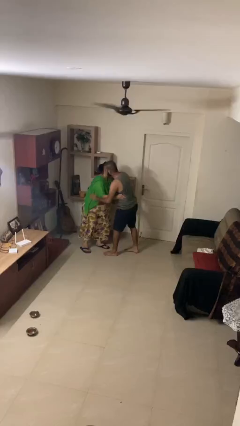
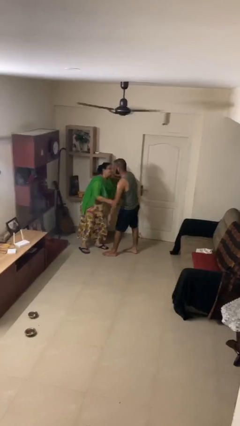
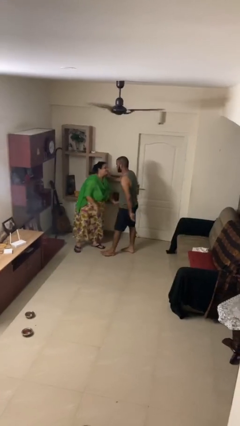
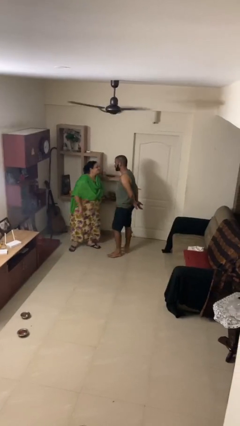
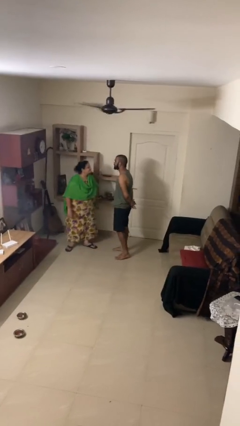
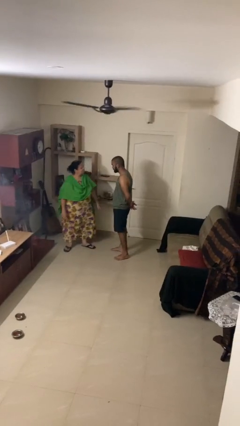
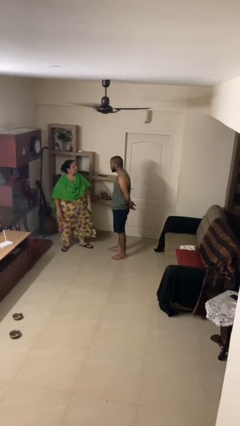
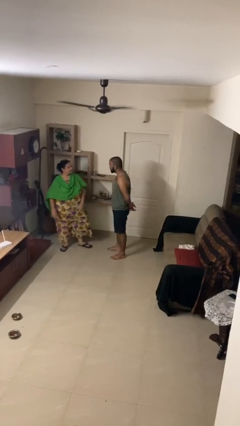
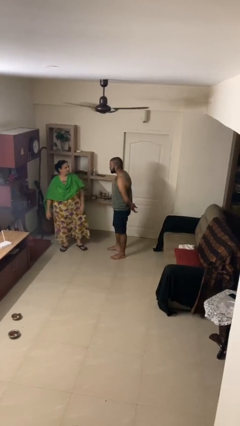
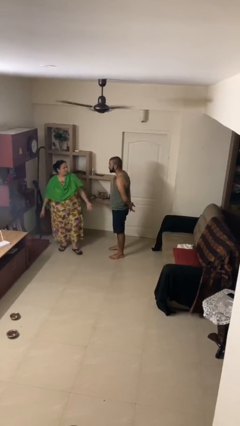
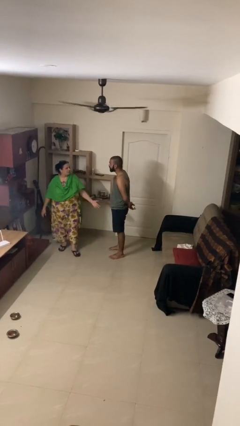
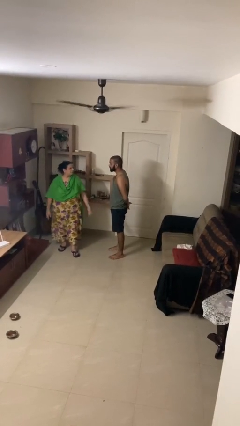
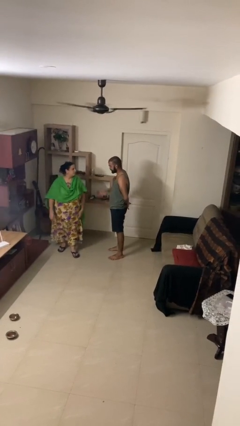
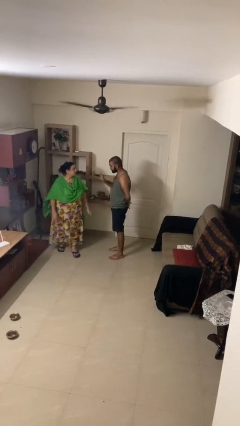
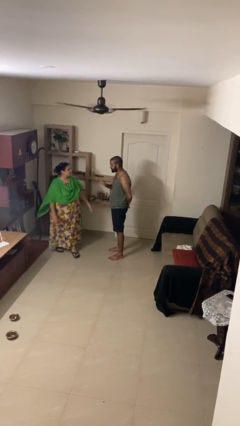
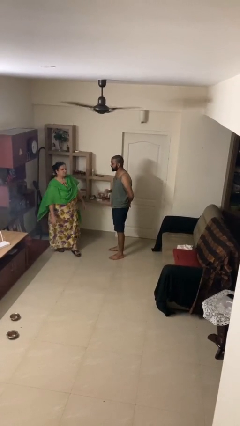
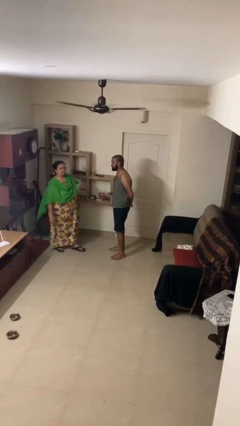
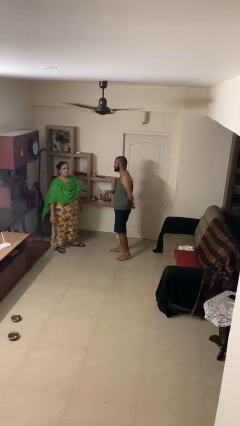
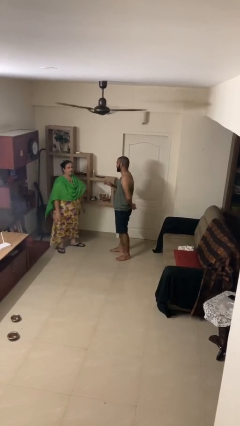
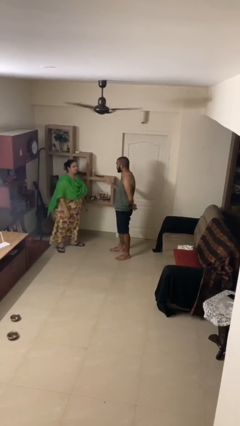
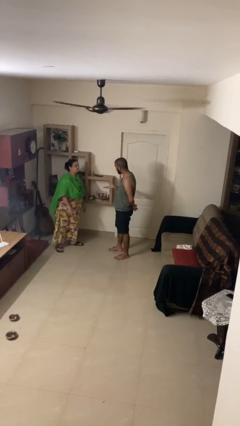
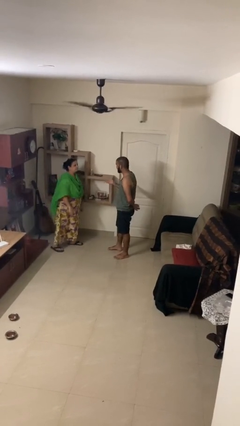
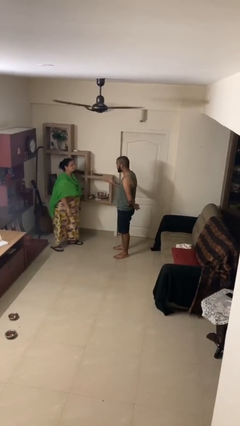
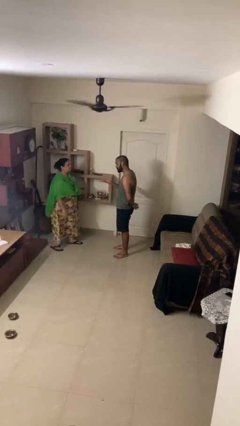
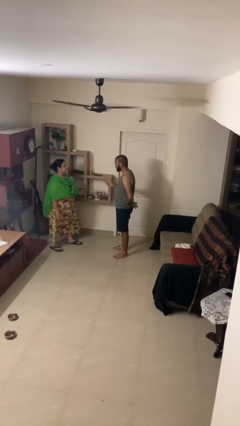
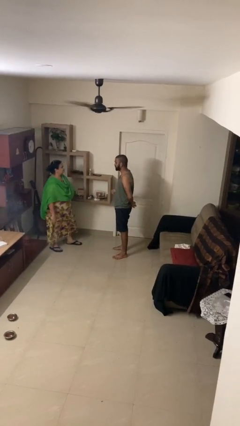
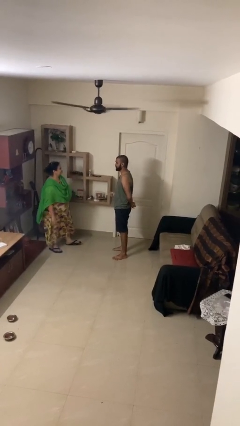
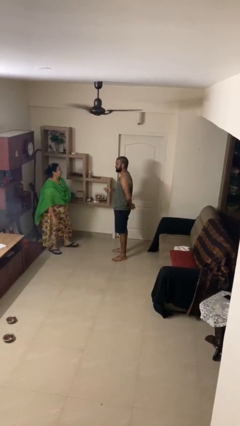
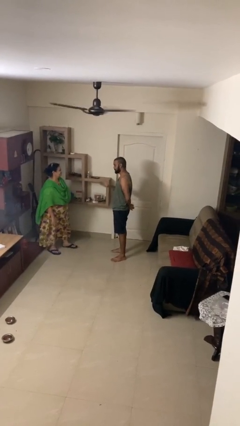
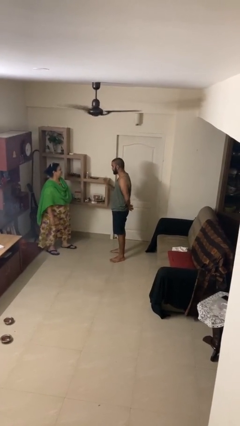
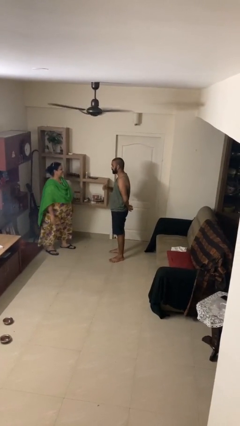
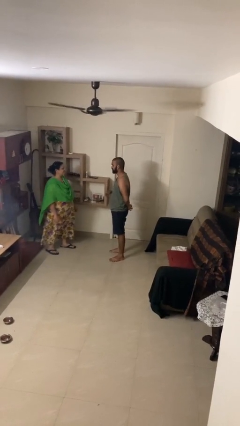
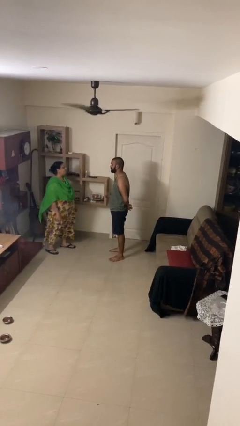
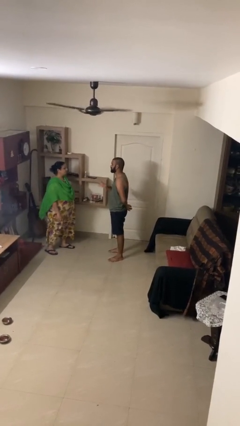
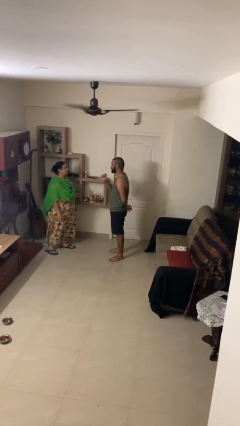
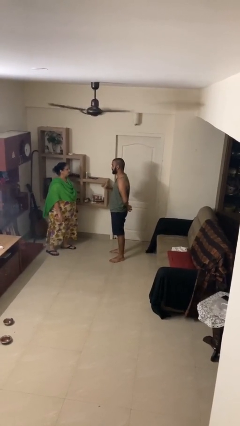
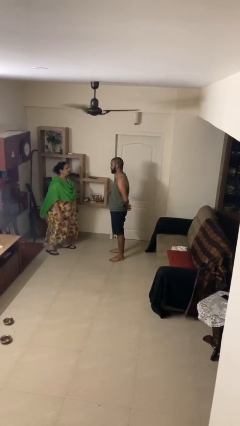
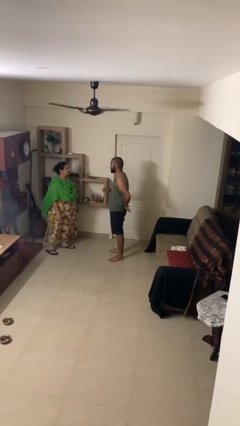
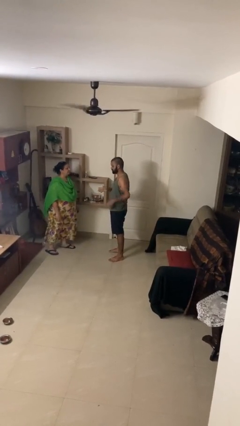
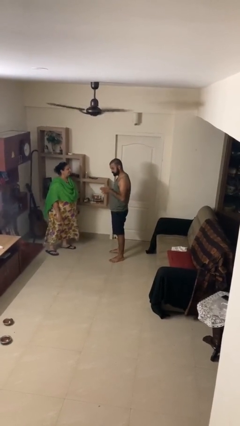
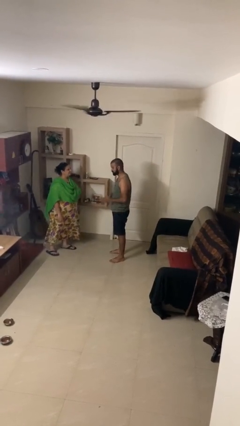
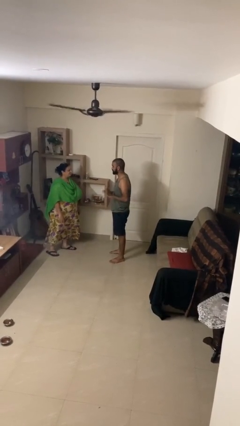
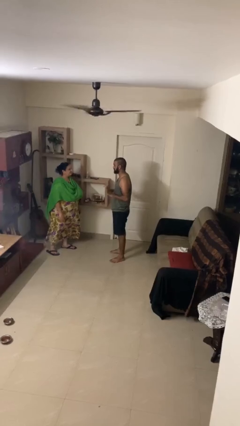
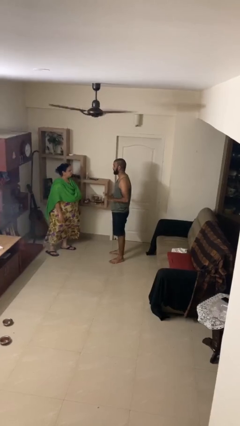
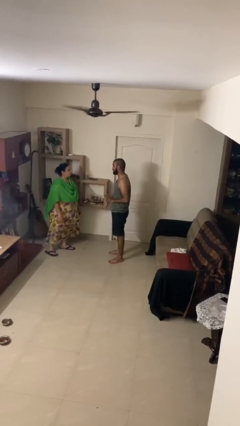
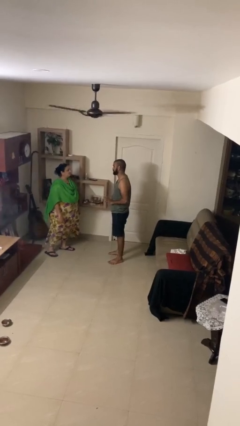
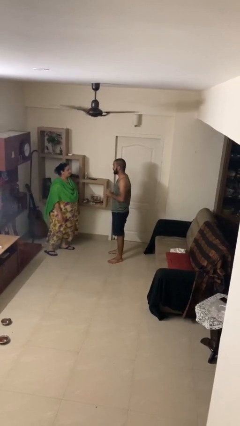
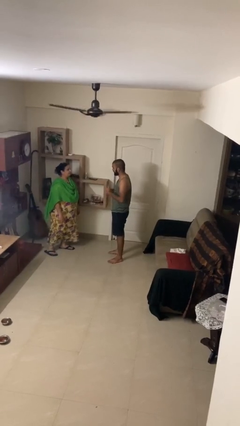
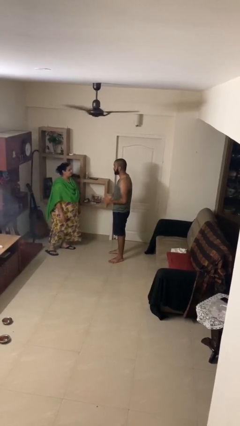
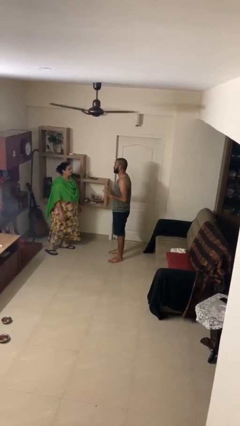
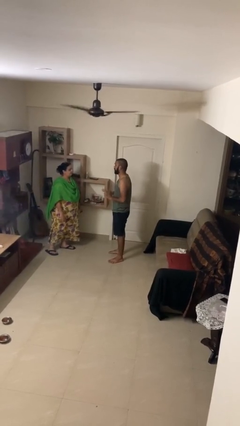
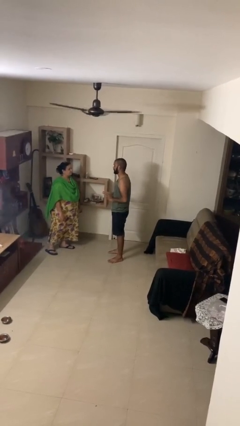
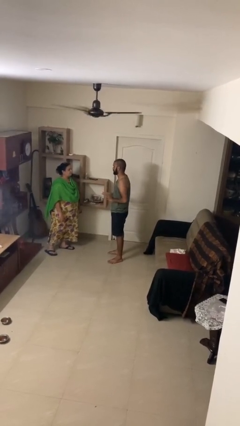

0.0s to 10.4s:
person talks to person

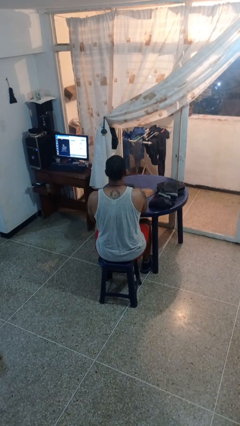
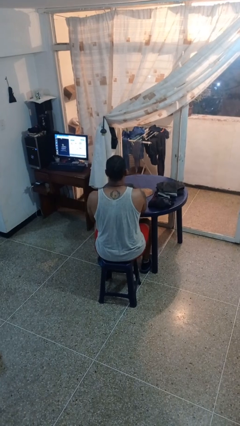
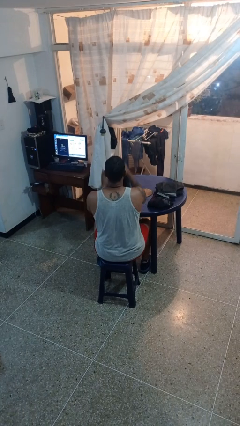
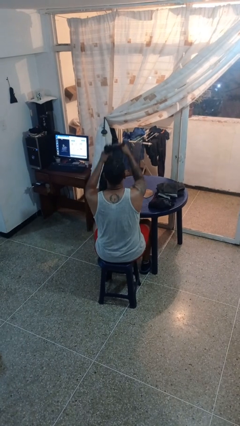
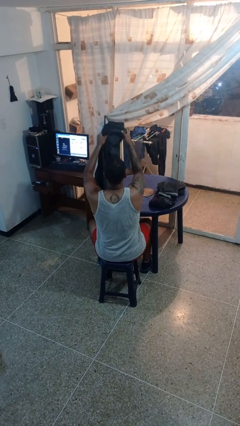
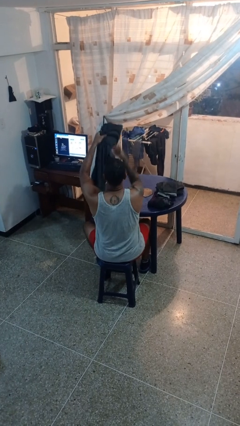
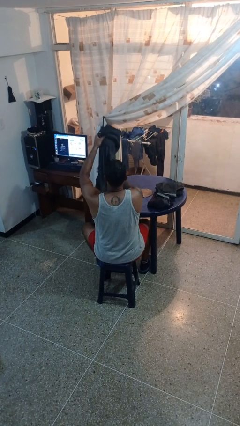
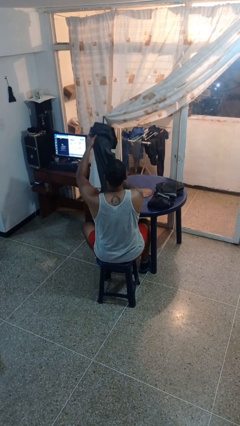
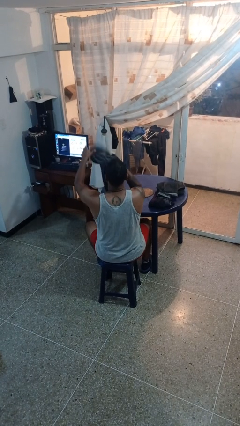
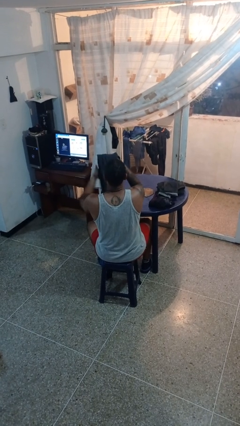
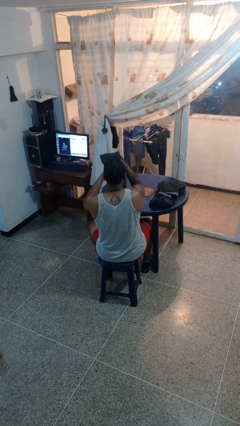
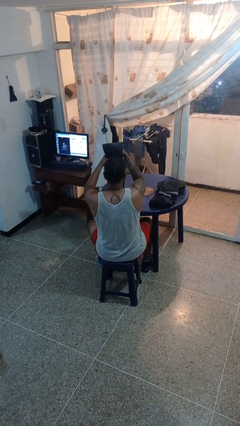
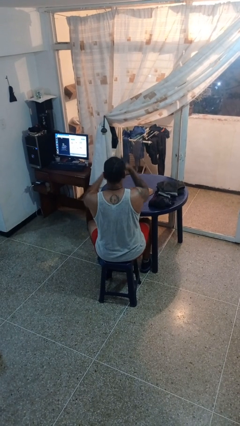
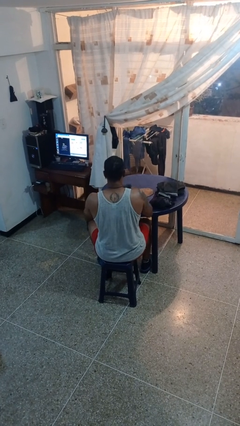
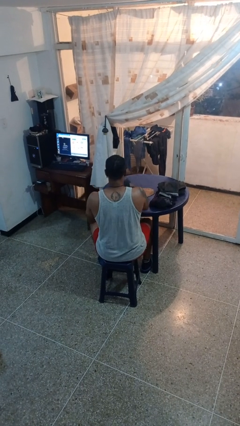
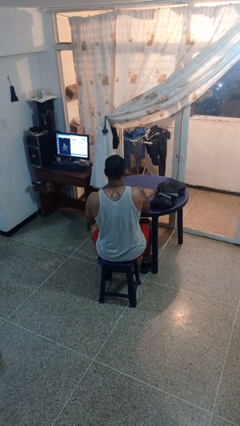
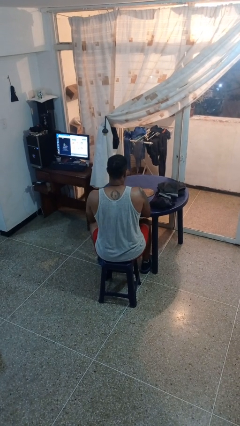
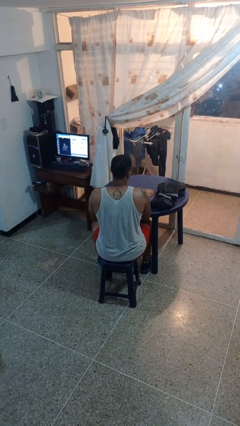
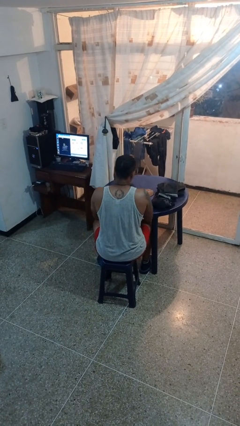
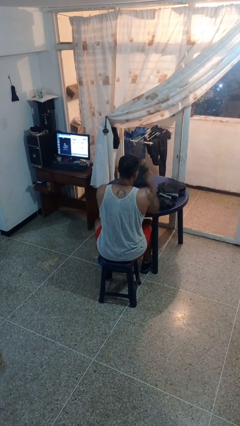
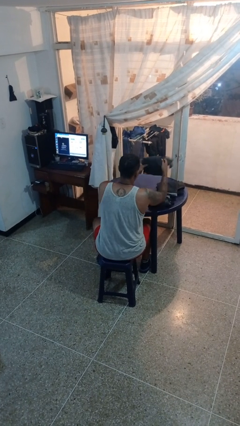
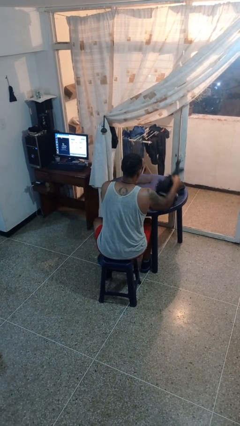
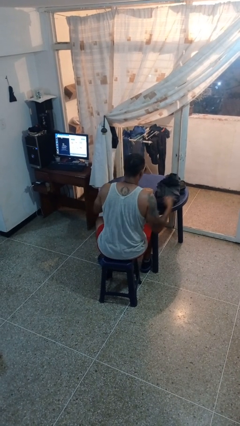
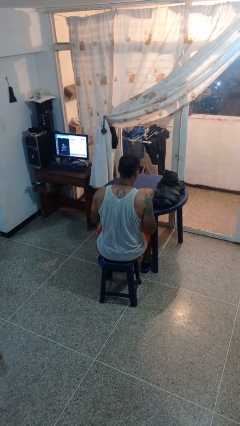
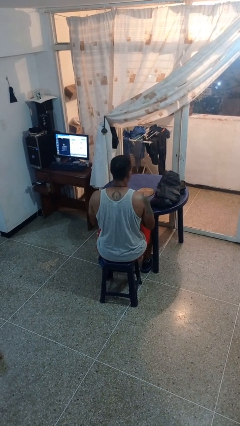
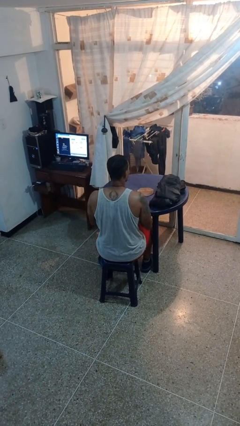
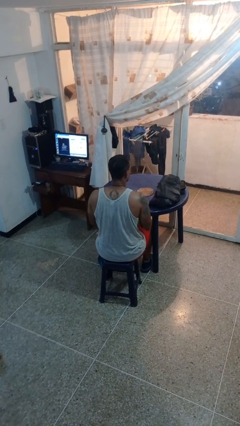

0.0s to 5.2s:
person folds pants

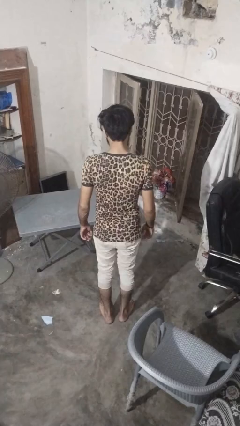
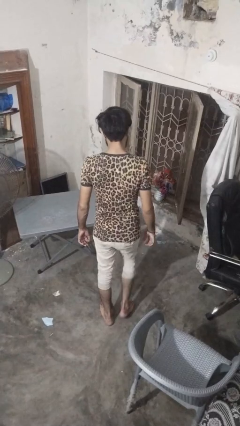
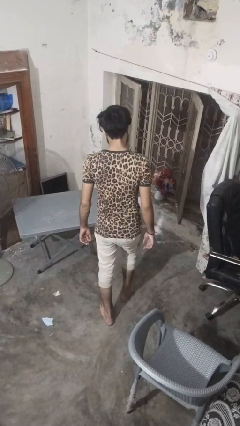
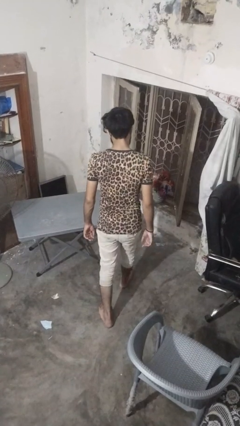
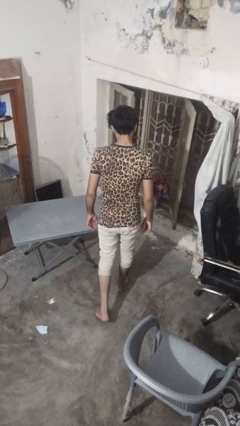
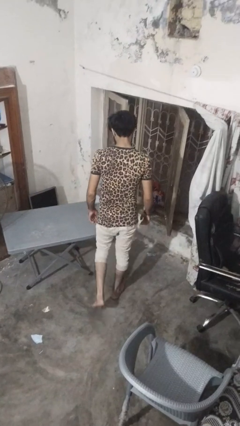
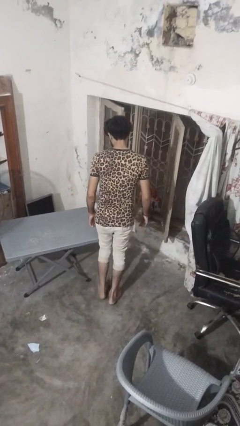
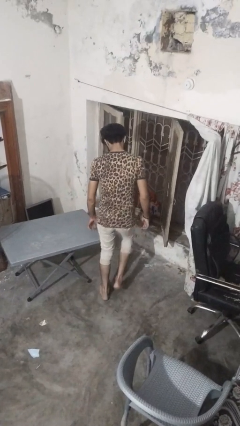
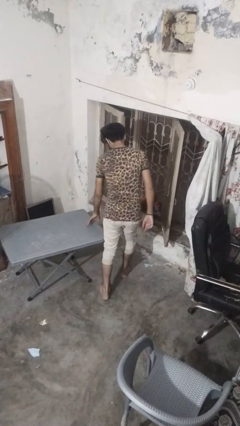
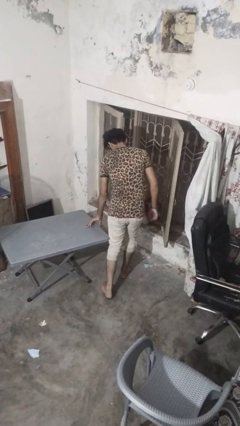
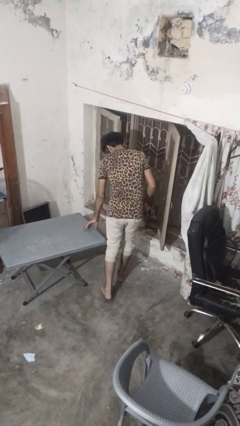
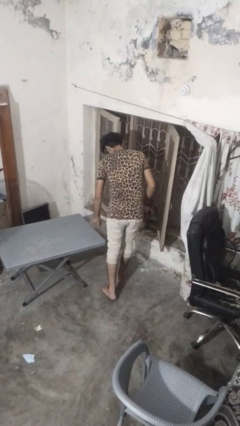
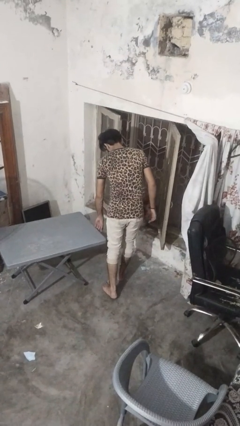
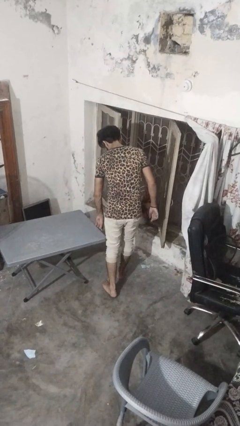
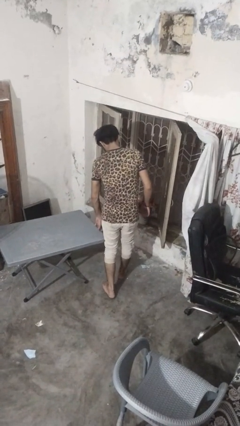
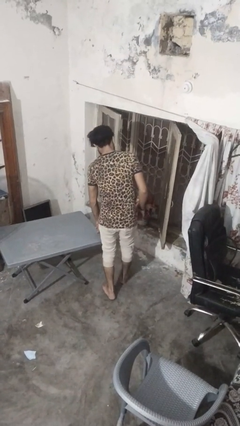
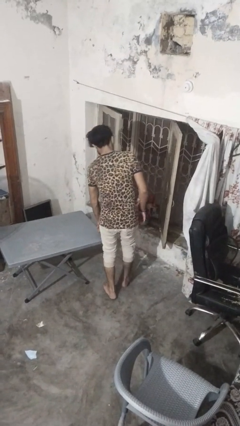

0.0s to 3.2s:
person bumps into table
